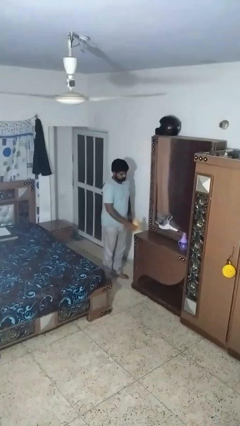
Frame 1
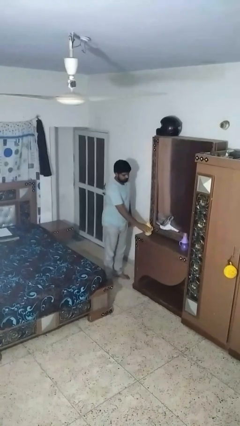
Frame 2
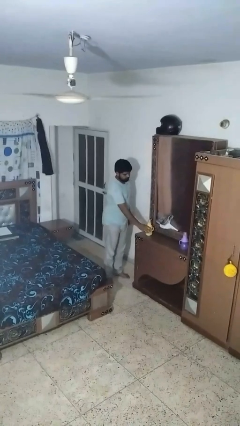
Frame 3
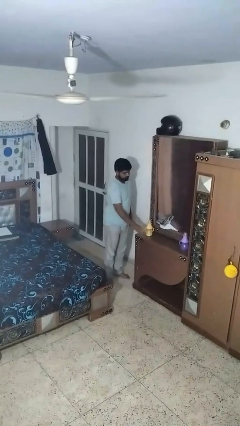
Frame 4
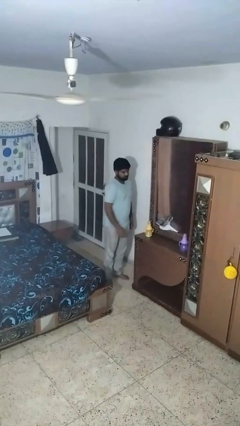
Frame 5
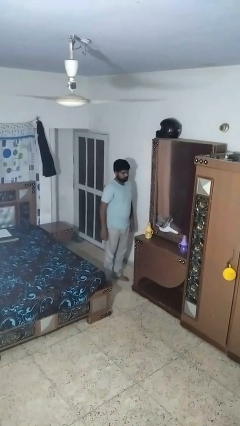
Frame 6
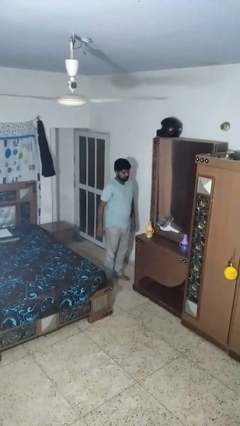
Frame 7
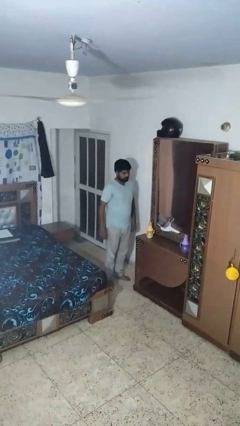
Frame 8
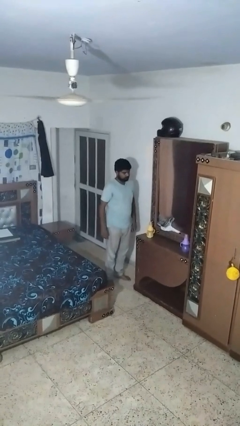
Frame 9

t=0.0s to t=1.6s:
person puts down object on countertop

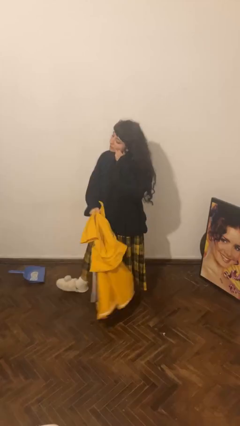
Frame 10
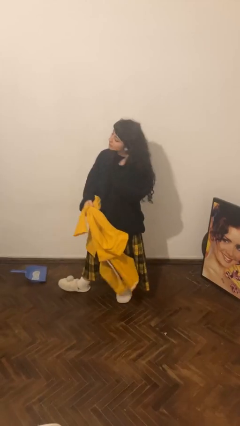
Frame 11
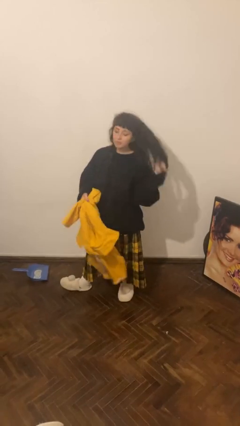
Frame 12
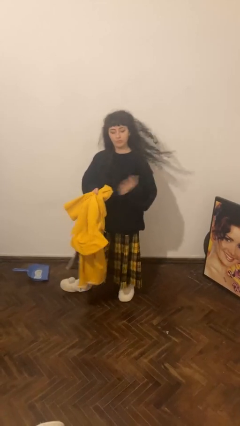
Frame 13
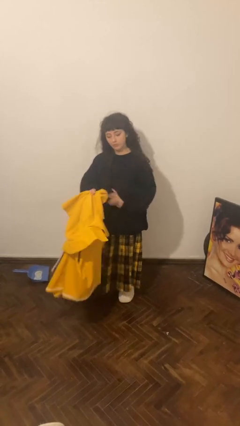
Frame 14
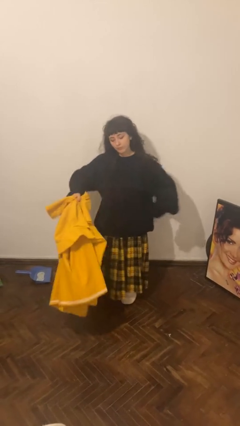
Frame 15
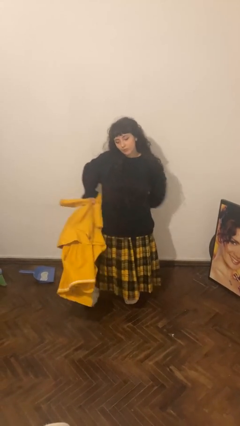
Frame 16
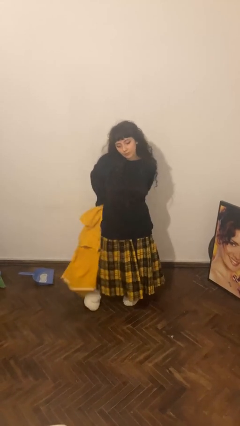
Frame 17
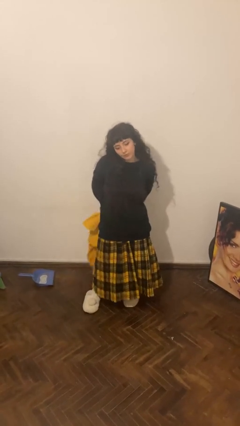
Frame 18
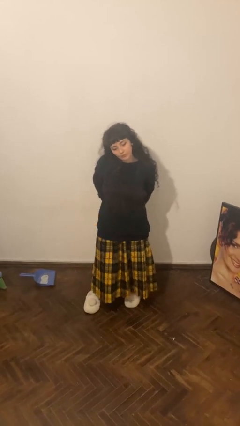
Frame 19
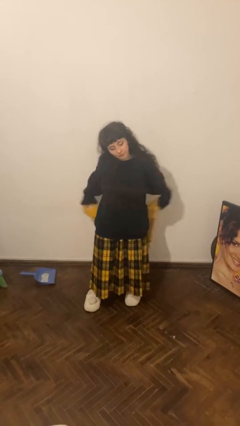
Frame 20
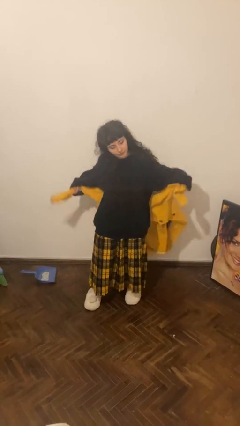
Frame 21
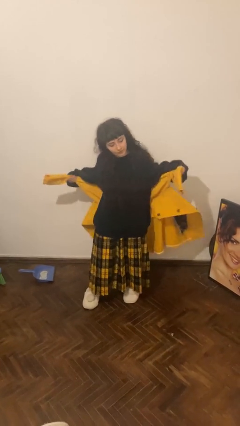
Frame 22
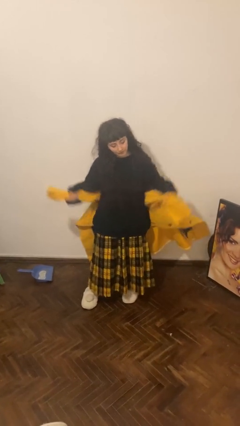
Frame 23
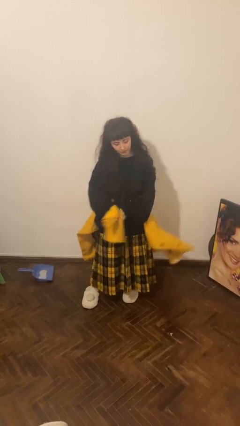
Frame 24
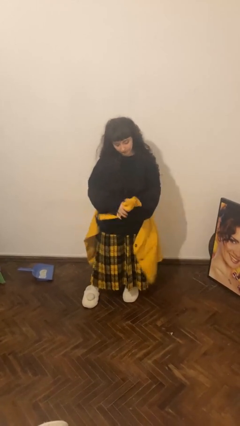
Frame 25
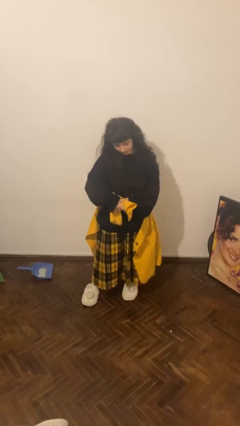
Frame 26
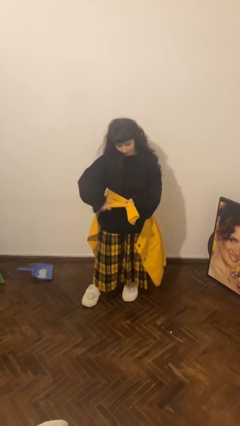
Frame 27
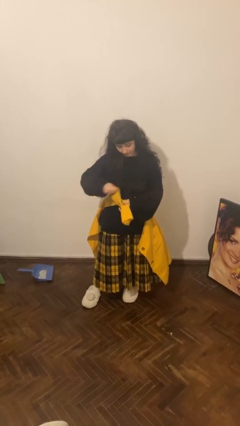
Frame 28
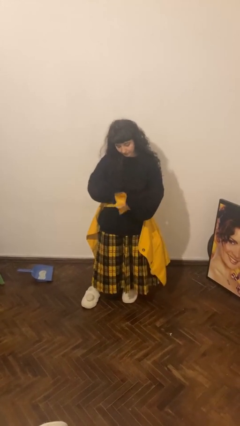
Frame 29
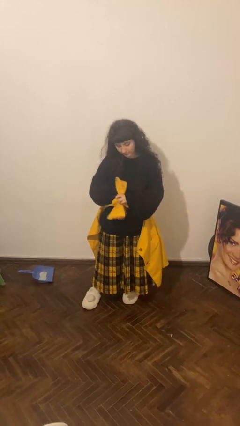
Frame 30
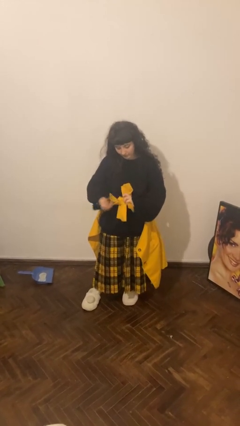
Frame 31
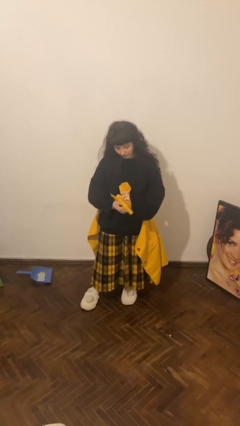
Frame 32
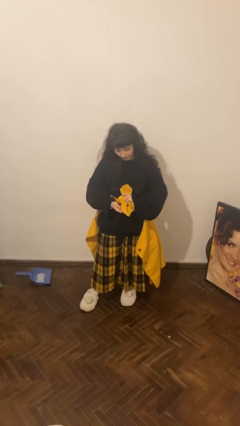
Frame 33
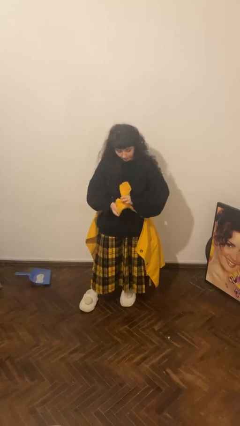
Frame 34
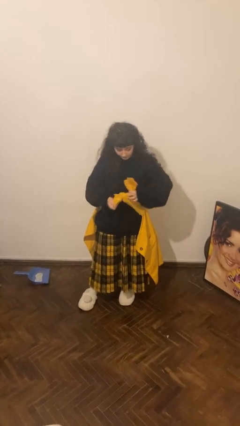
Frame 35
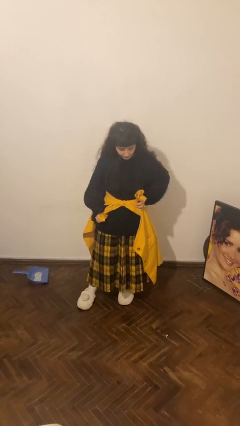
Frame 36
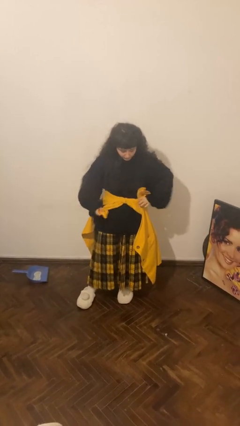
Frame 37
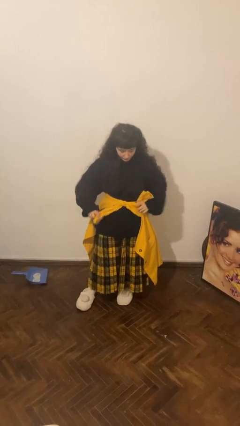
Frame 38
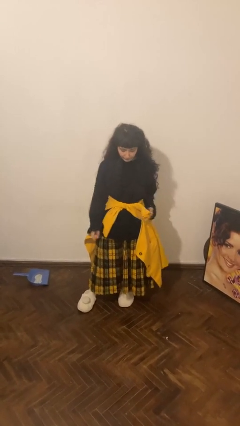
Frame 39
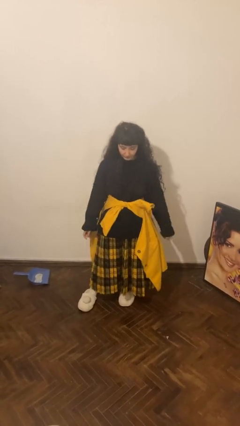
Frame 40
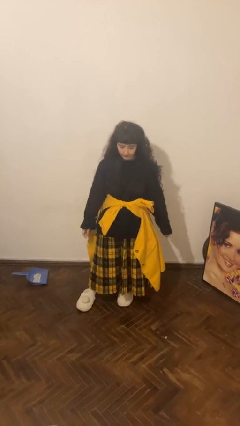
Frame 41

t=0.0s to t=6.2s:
person ties jacket around waist

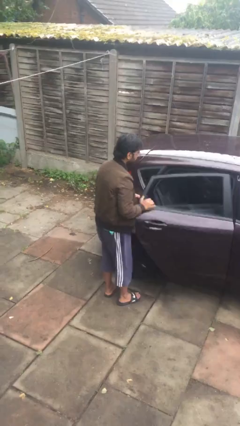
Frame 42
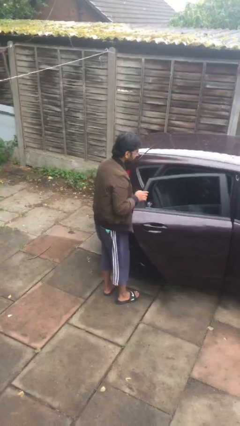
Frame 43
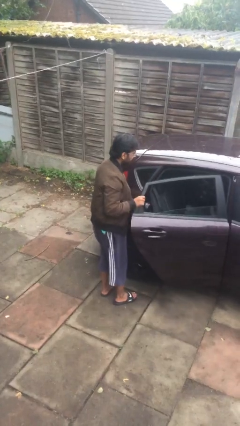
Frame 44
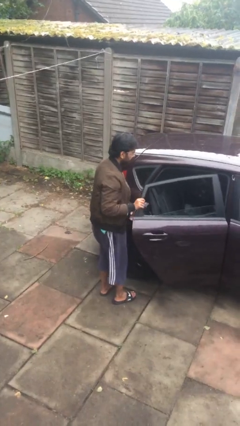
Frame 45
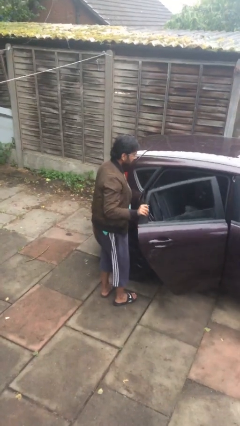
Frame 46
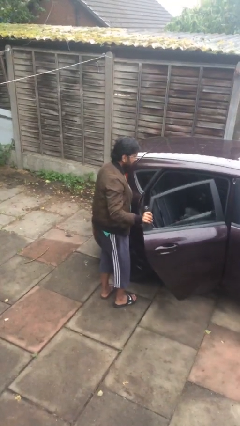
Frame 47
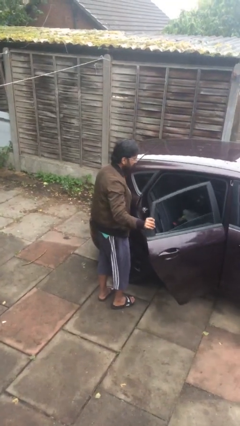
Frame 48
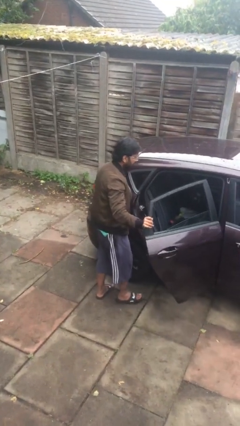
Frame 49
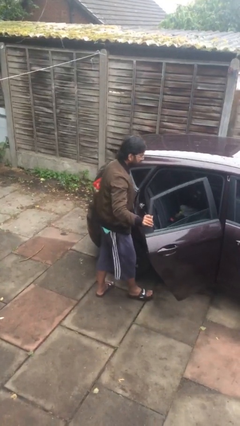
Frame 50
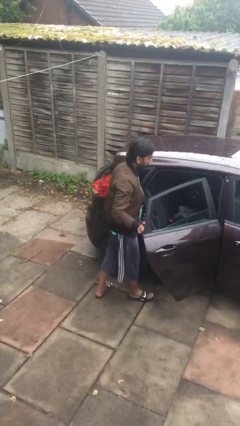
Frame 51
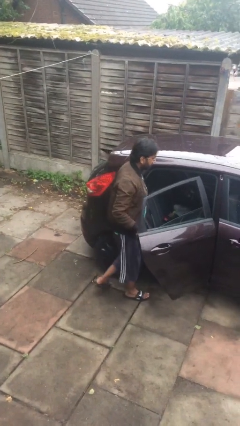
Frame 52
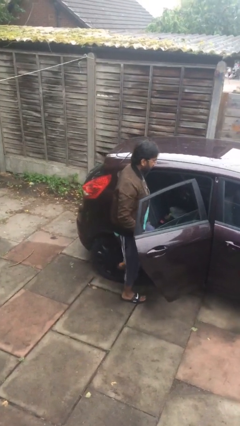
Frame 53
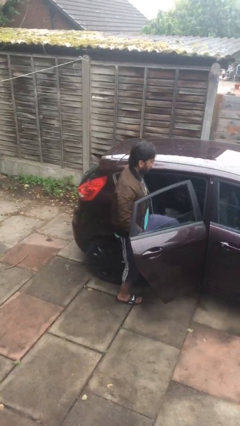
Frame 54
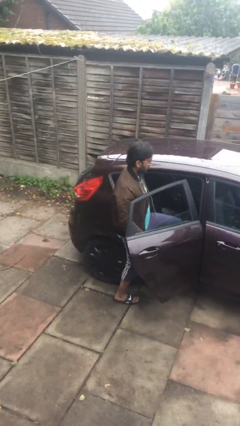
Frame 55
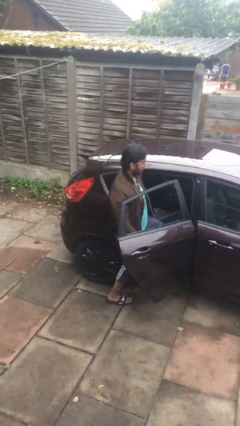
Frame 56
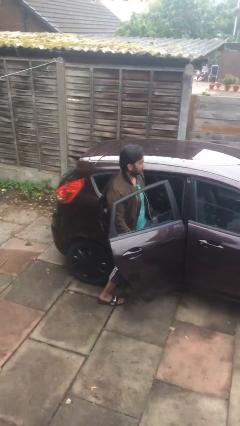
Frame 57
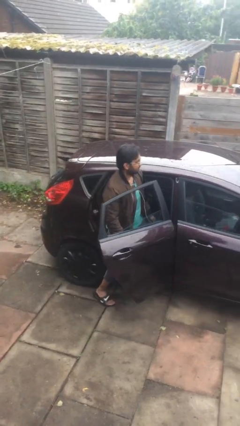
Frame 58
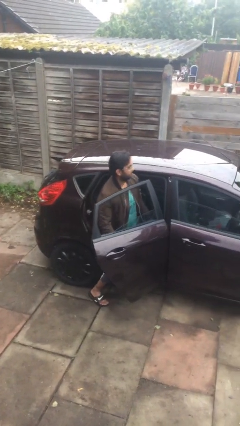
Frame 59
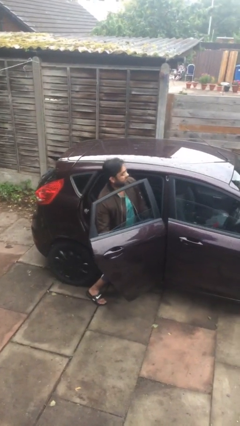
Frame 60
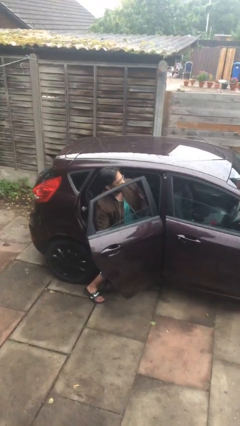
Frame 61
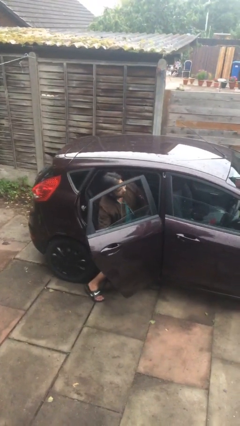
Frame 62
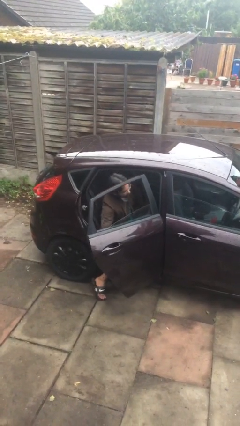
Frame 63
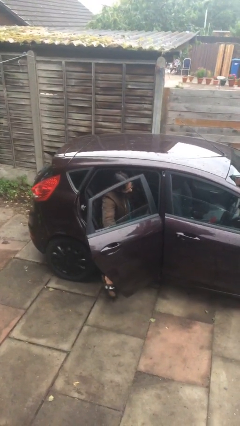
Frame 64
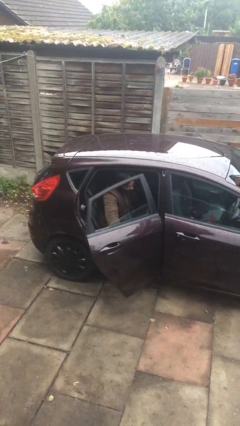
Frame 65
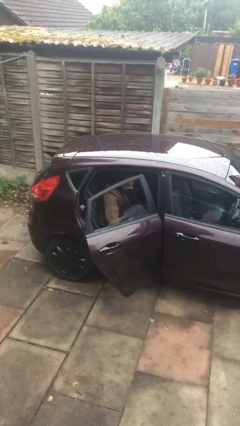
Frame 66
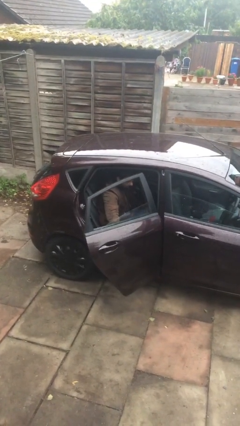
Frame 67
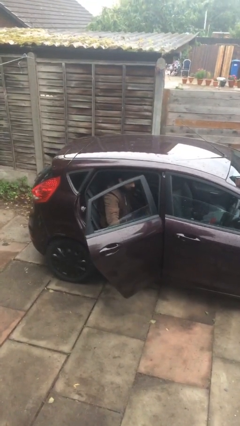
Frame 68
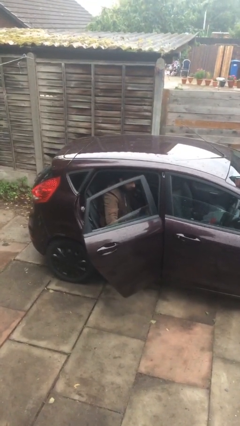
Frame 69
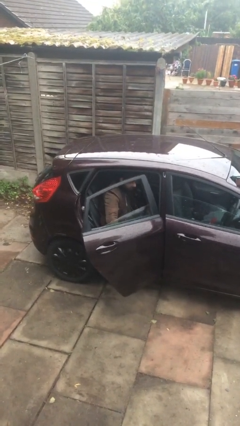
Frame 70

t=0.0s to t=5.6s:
person enters car

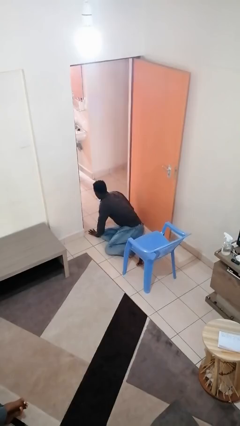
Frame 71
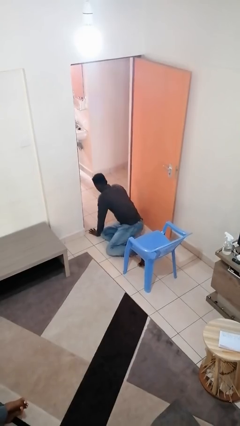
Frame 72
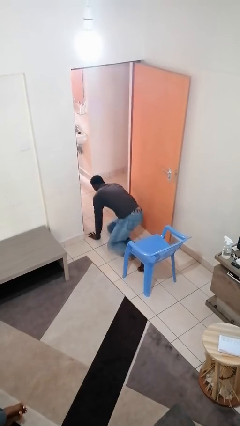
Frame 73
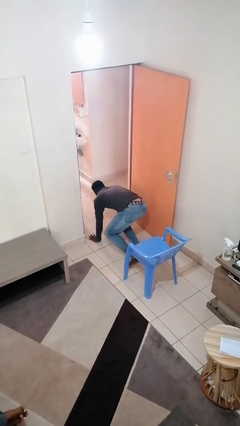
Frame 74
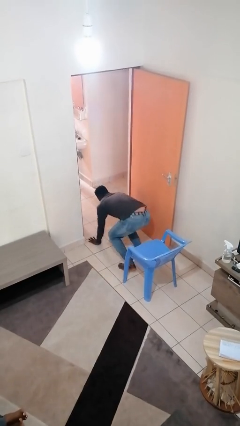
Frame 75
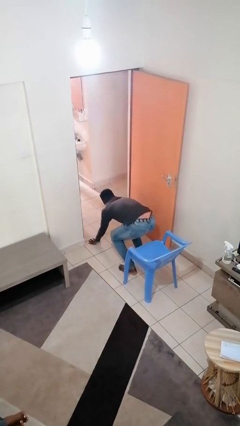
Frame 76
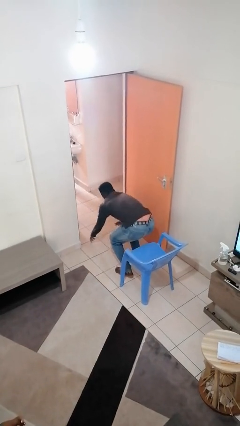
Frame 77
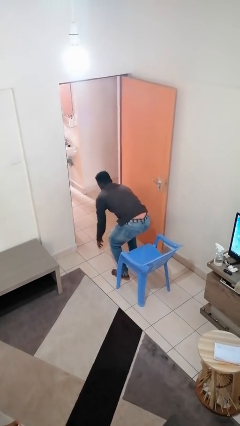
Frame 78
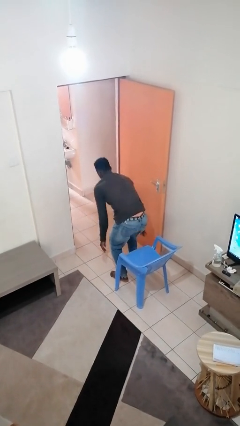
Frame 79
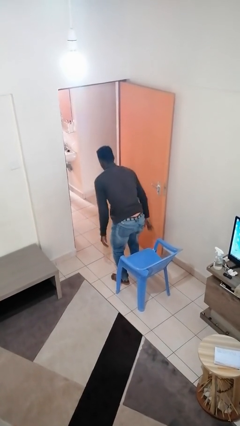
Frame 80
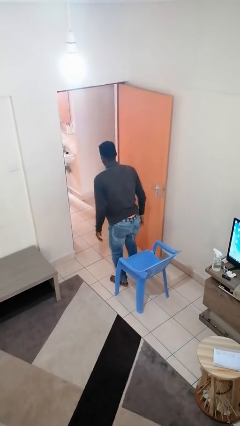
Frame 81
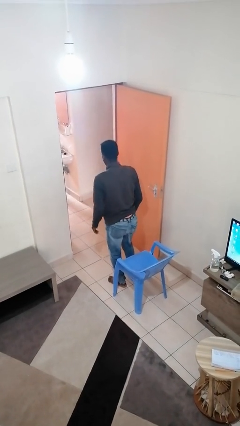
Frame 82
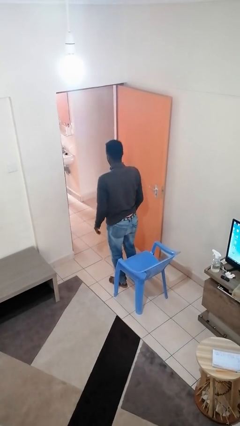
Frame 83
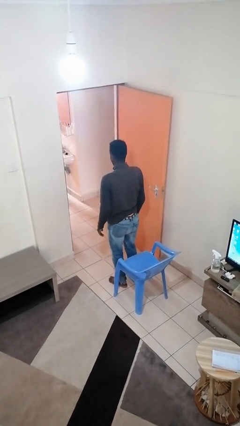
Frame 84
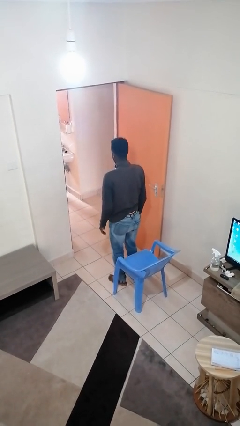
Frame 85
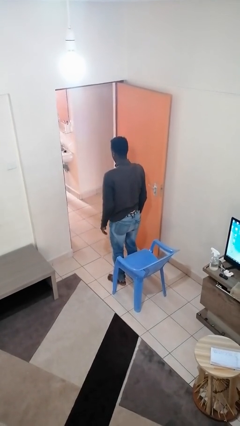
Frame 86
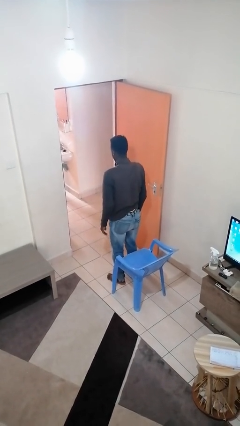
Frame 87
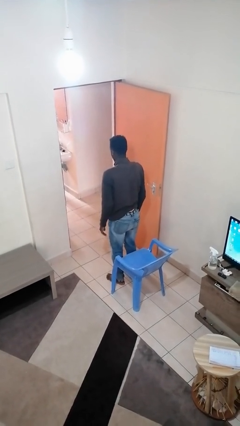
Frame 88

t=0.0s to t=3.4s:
person stands up from floor

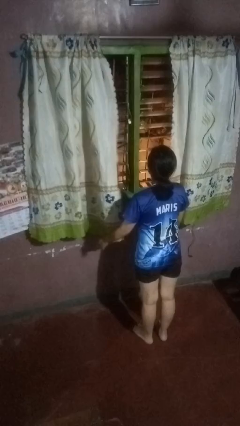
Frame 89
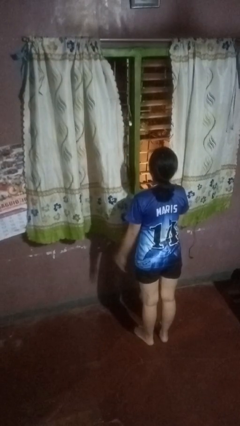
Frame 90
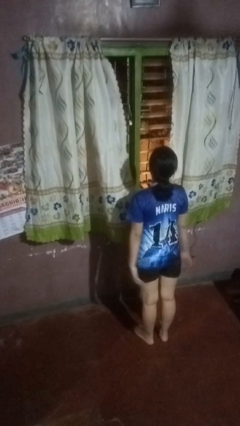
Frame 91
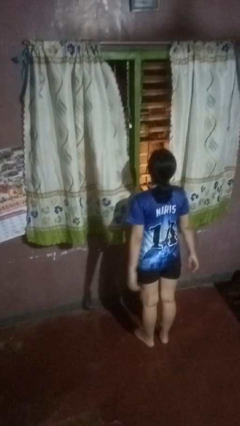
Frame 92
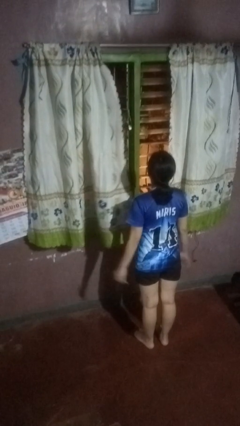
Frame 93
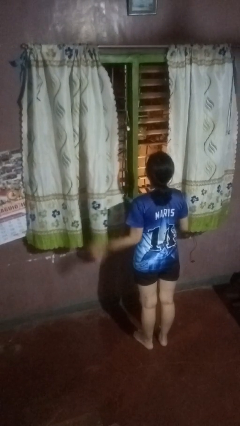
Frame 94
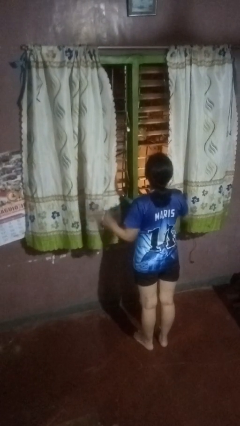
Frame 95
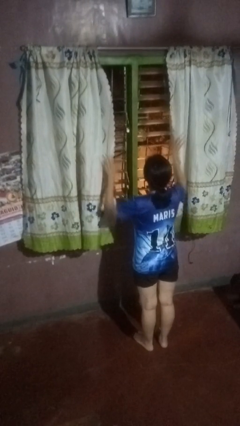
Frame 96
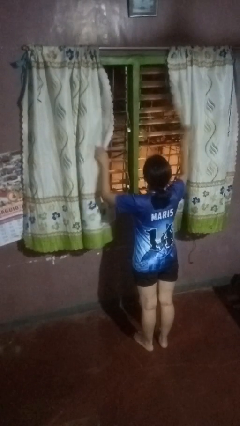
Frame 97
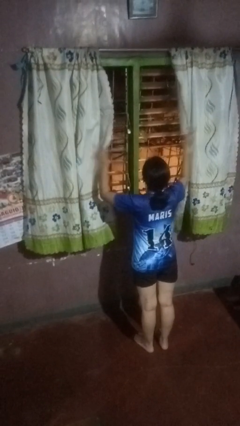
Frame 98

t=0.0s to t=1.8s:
person closes curtains
